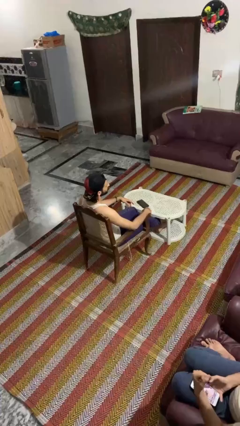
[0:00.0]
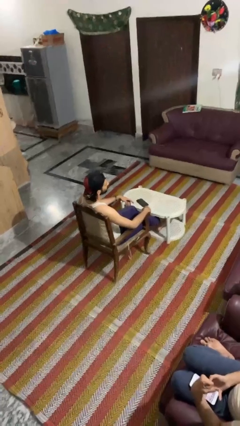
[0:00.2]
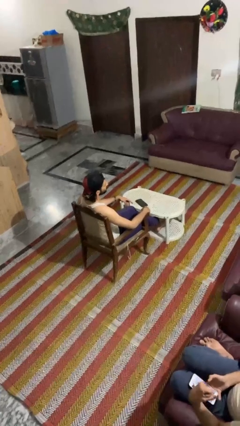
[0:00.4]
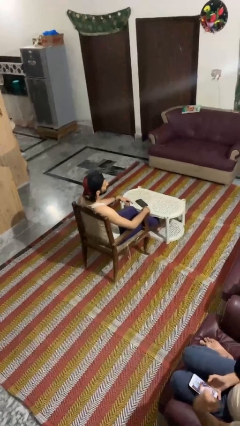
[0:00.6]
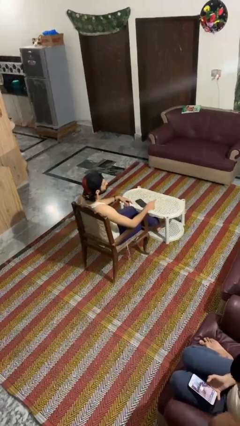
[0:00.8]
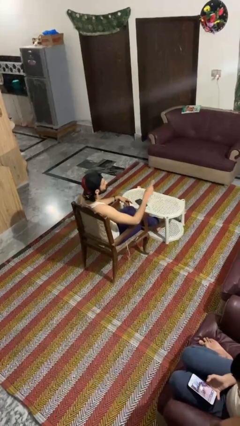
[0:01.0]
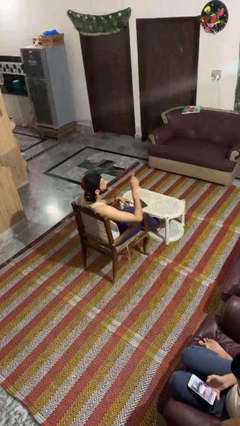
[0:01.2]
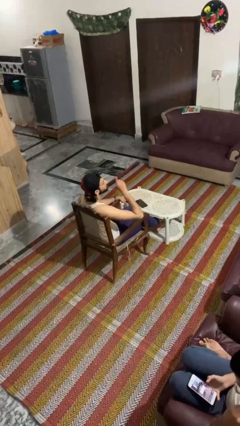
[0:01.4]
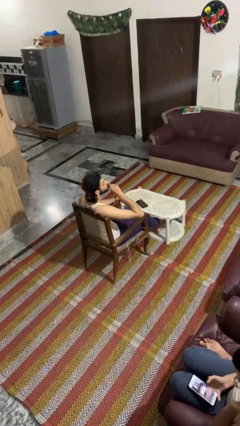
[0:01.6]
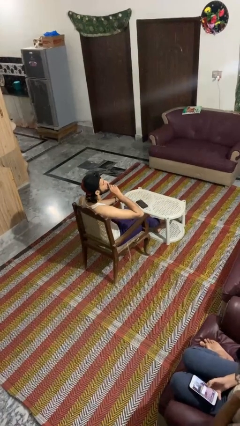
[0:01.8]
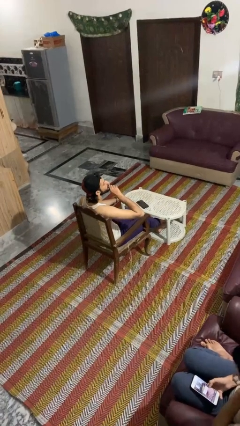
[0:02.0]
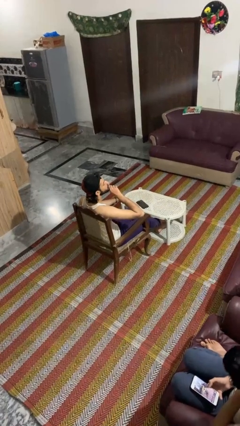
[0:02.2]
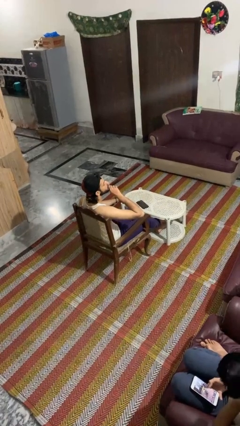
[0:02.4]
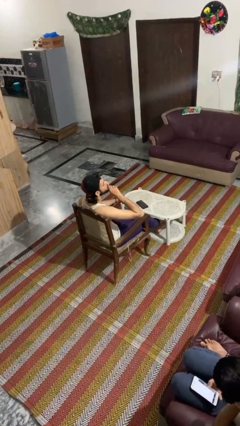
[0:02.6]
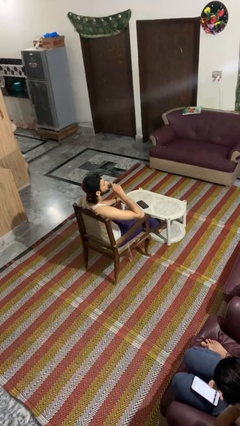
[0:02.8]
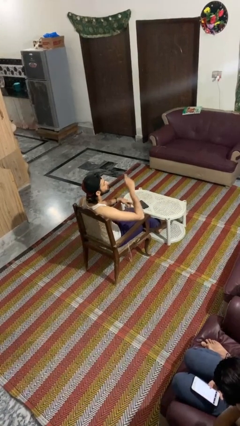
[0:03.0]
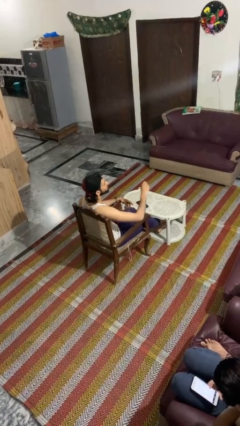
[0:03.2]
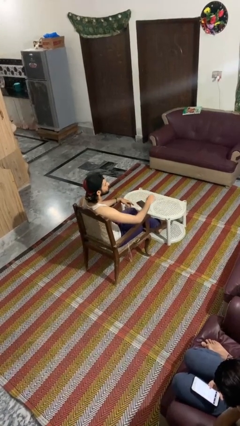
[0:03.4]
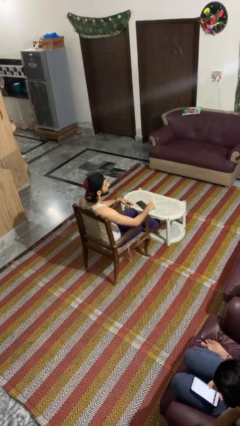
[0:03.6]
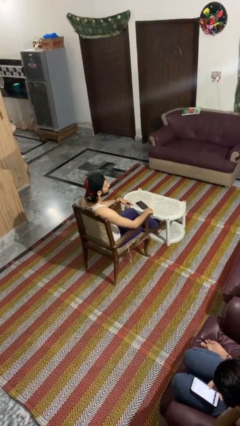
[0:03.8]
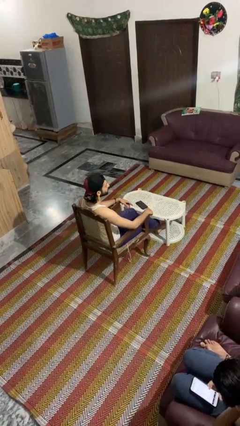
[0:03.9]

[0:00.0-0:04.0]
person gestures be quiet

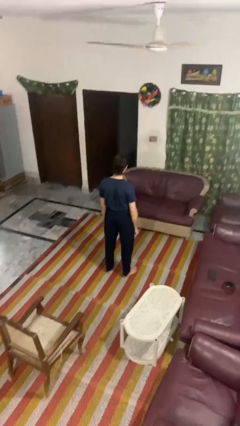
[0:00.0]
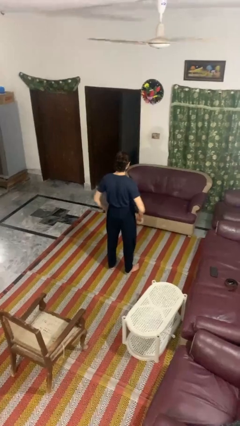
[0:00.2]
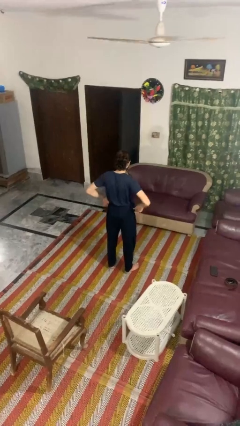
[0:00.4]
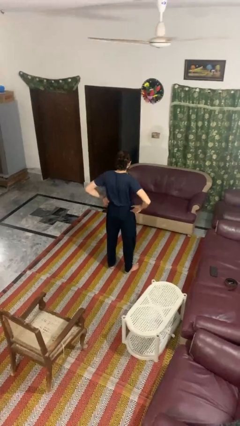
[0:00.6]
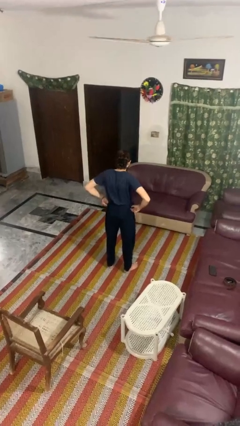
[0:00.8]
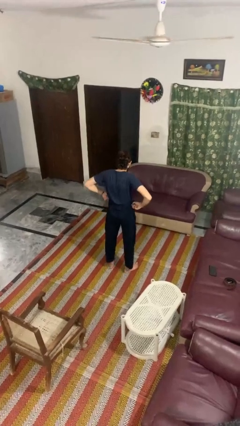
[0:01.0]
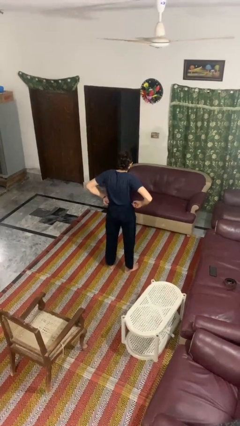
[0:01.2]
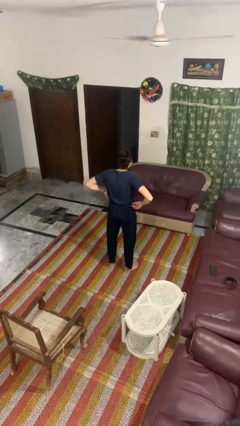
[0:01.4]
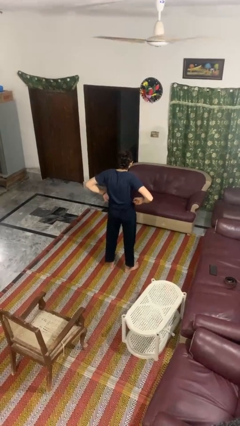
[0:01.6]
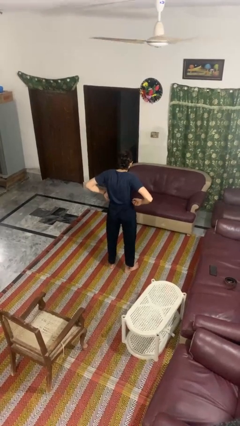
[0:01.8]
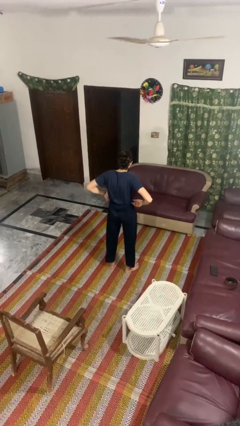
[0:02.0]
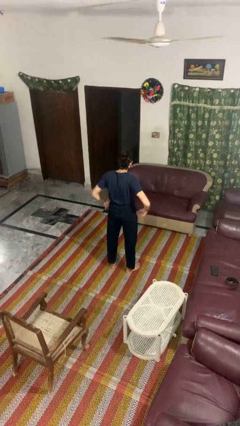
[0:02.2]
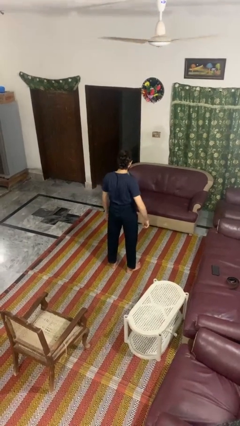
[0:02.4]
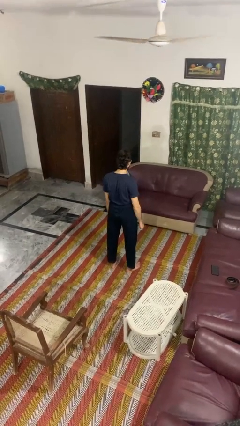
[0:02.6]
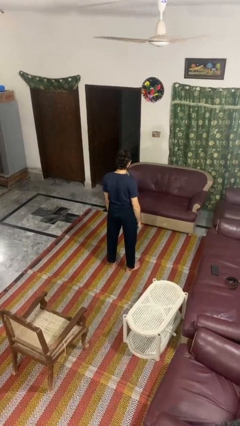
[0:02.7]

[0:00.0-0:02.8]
person hikes up pants

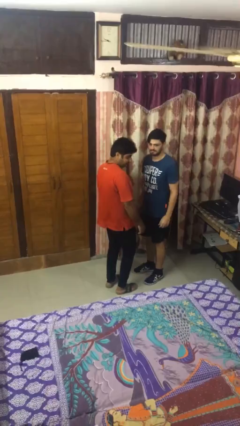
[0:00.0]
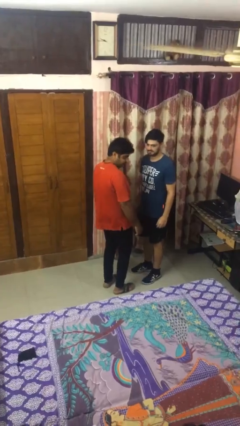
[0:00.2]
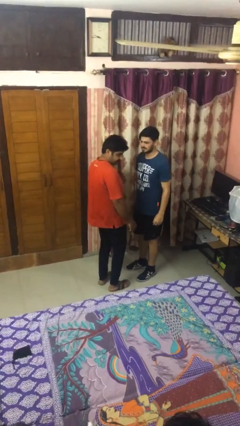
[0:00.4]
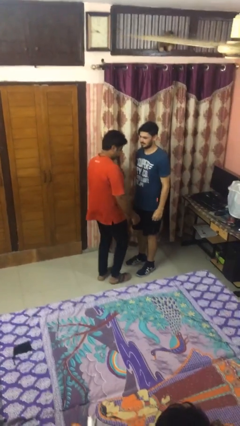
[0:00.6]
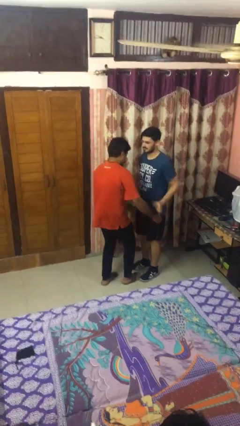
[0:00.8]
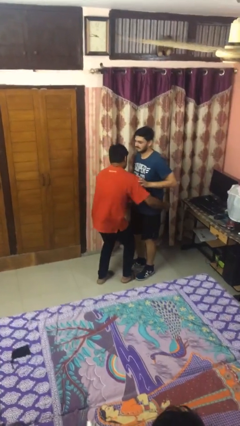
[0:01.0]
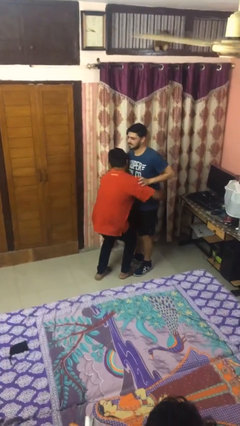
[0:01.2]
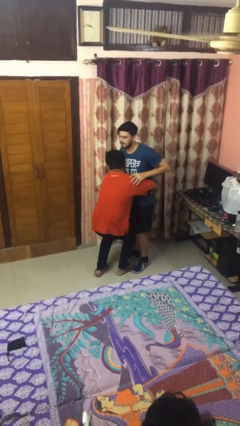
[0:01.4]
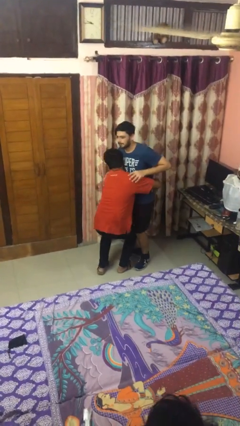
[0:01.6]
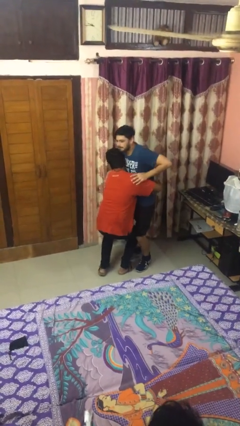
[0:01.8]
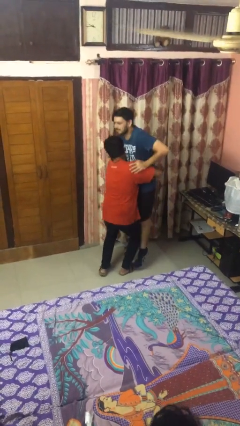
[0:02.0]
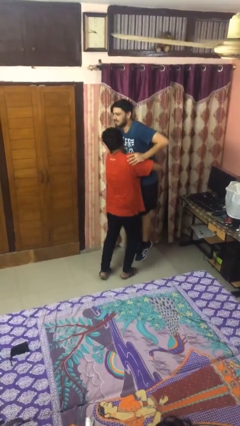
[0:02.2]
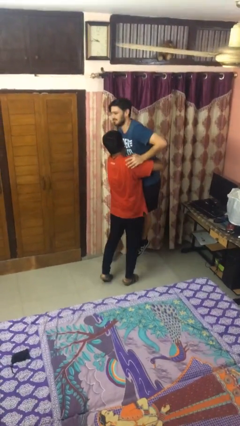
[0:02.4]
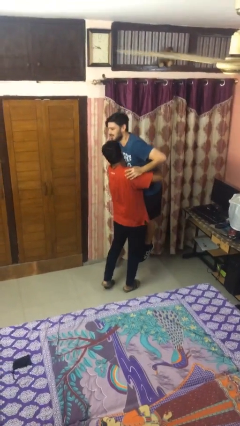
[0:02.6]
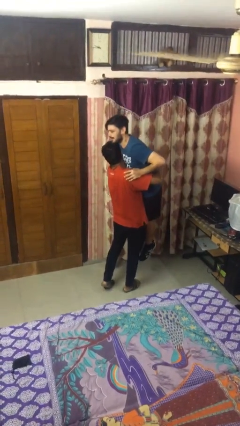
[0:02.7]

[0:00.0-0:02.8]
person picks up person

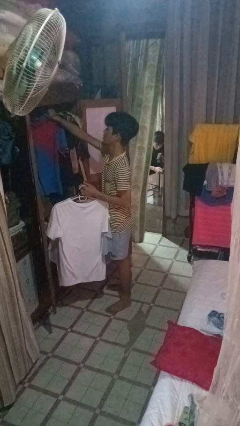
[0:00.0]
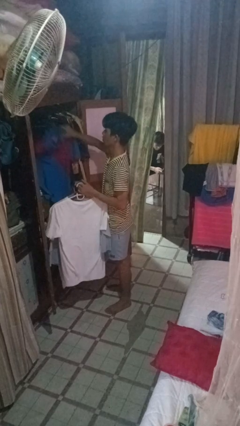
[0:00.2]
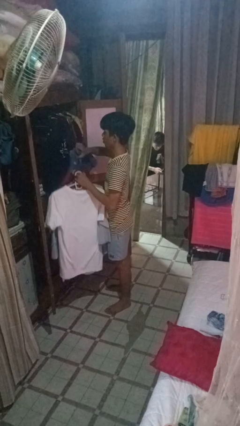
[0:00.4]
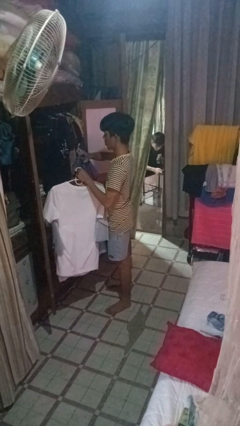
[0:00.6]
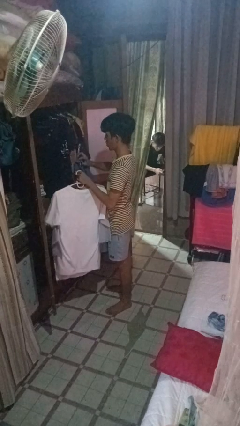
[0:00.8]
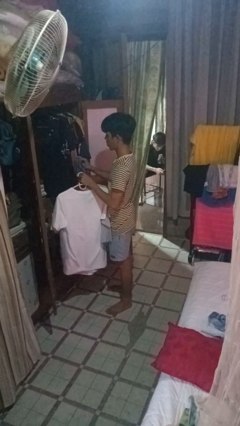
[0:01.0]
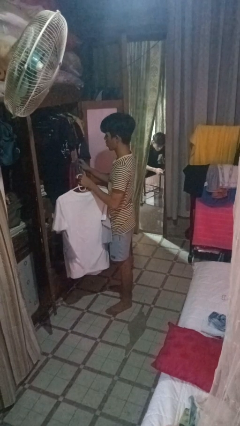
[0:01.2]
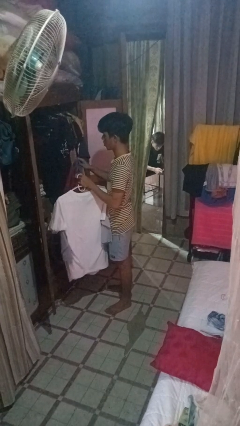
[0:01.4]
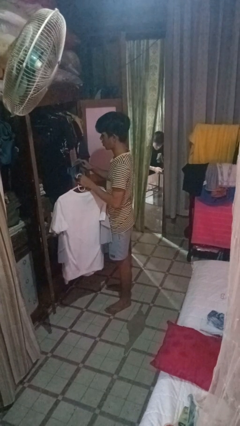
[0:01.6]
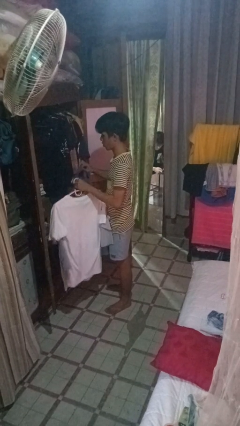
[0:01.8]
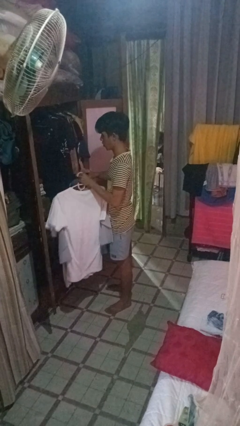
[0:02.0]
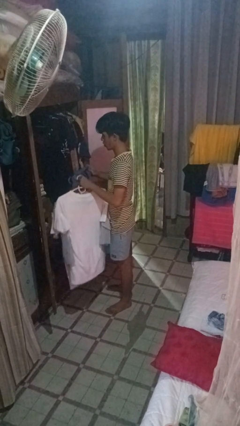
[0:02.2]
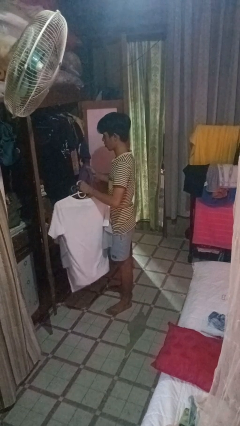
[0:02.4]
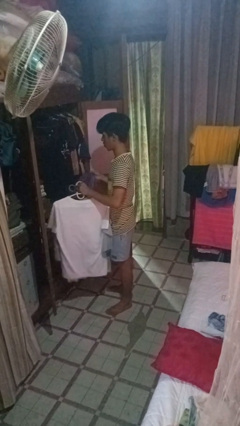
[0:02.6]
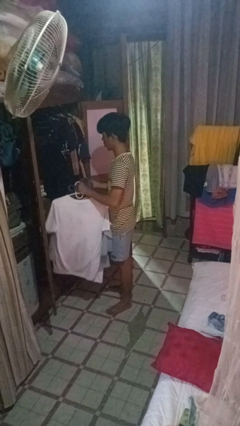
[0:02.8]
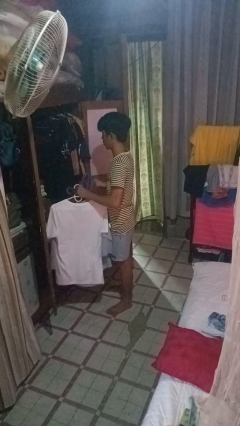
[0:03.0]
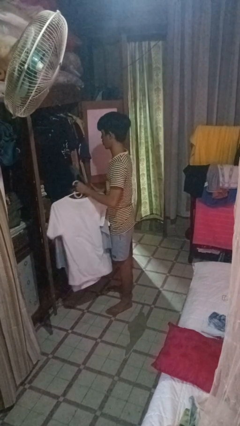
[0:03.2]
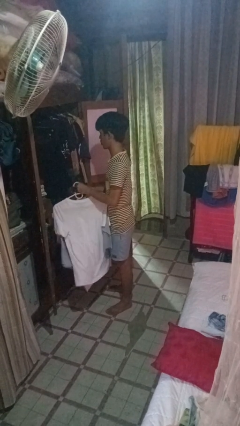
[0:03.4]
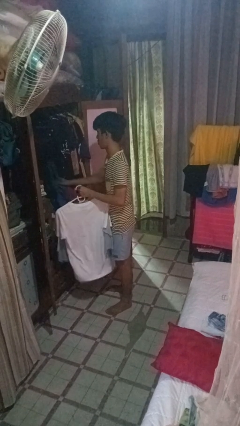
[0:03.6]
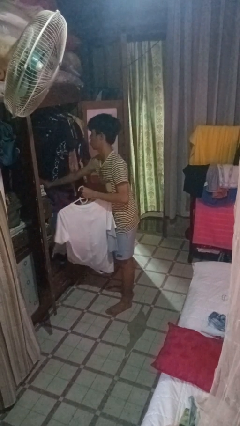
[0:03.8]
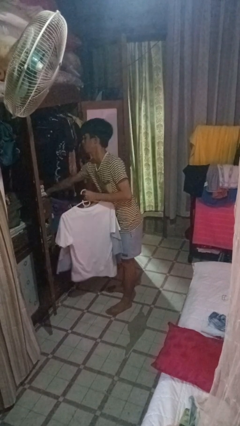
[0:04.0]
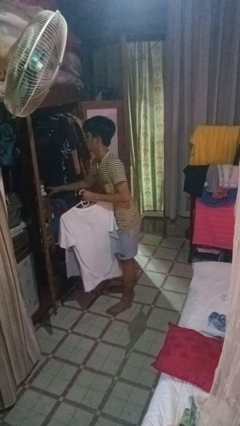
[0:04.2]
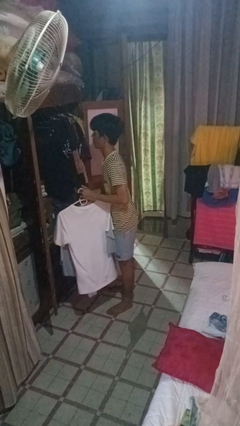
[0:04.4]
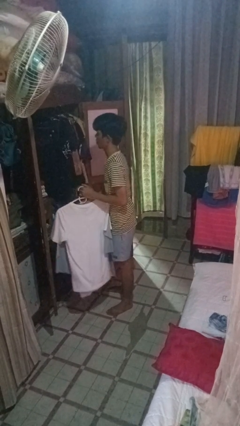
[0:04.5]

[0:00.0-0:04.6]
person takes clothes from closet

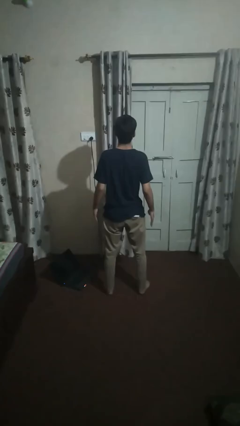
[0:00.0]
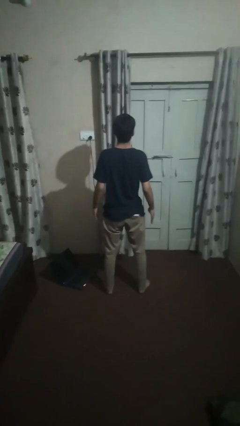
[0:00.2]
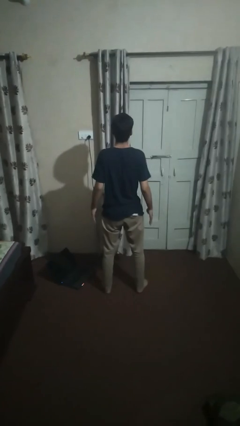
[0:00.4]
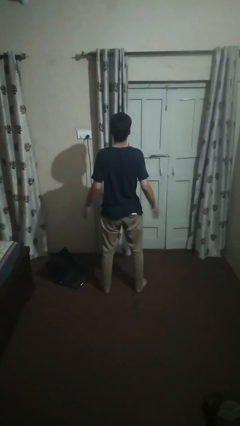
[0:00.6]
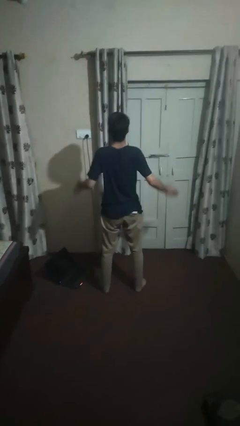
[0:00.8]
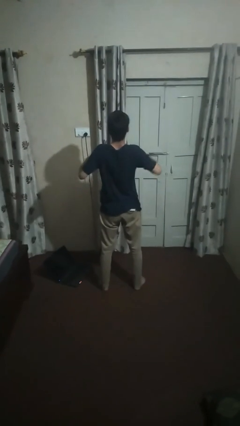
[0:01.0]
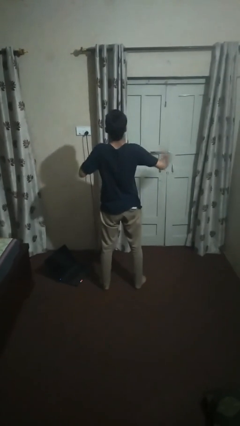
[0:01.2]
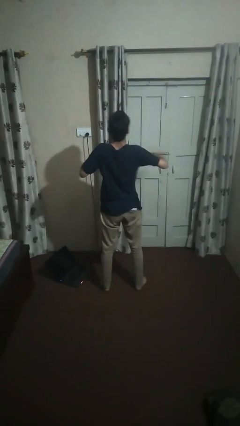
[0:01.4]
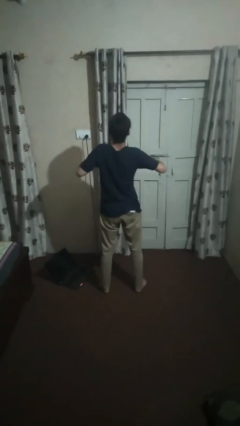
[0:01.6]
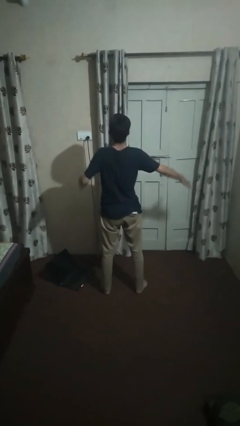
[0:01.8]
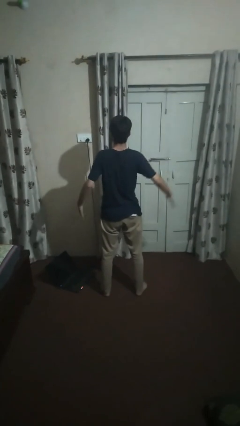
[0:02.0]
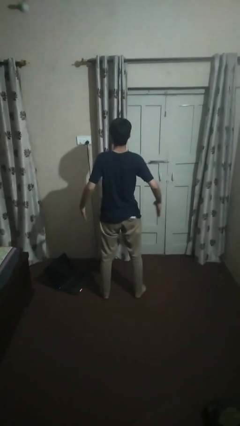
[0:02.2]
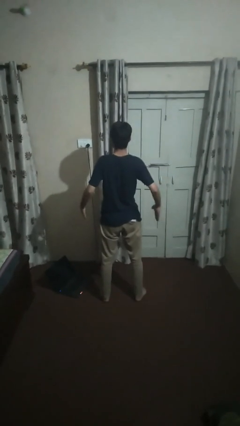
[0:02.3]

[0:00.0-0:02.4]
person drums on chest

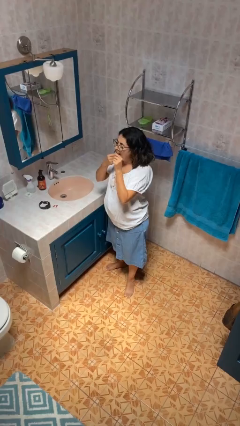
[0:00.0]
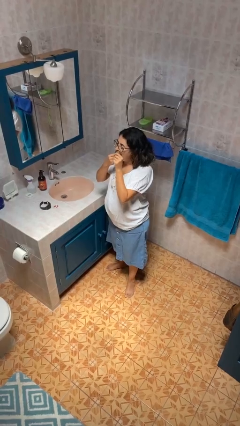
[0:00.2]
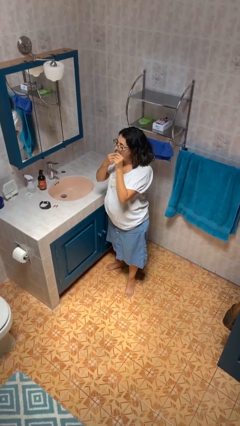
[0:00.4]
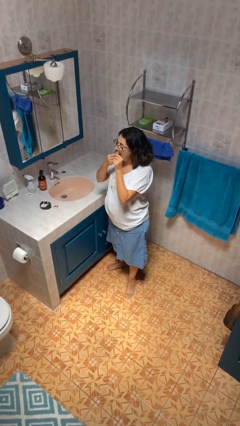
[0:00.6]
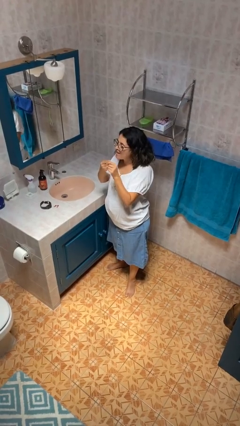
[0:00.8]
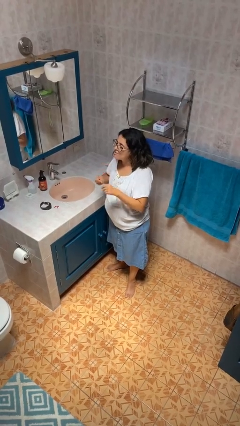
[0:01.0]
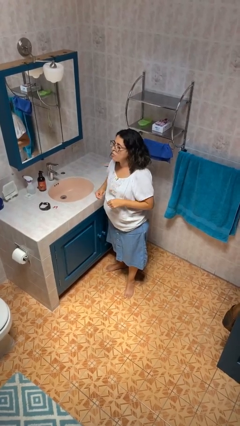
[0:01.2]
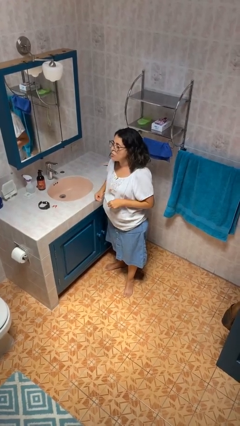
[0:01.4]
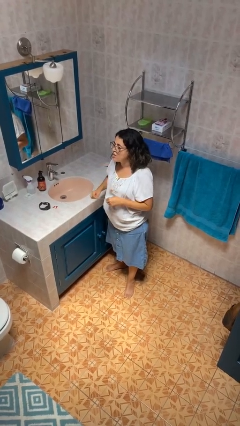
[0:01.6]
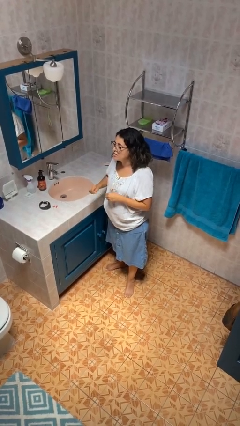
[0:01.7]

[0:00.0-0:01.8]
person flosses
